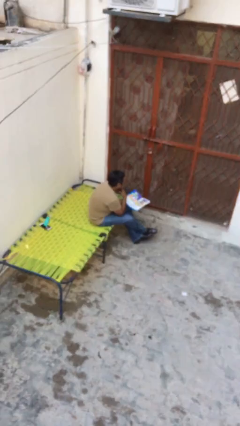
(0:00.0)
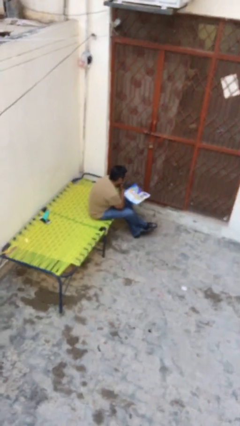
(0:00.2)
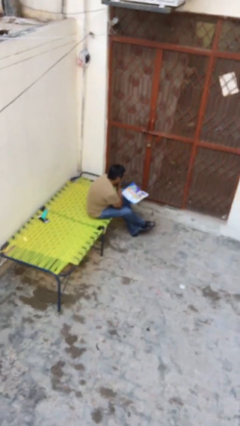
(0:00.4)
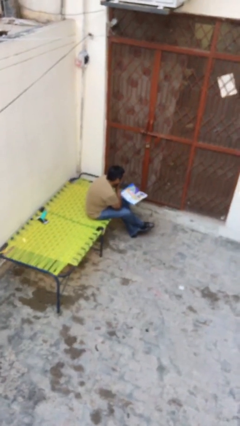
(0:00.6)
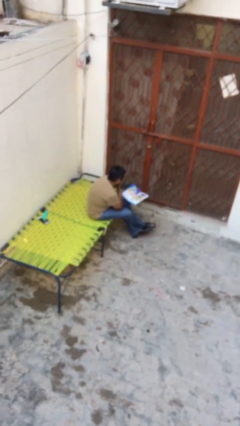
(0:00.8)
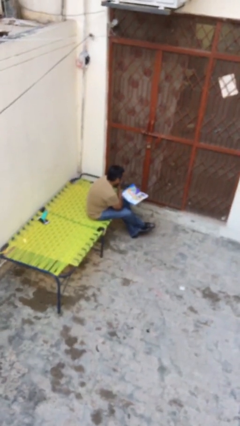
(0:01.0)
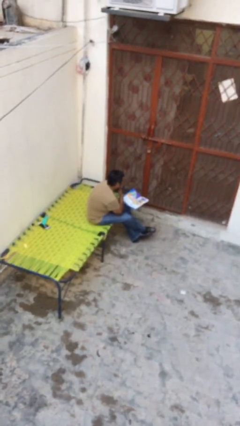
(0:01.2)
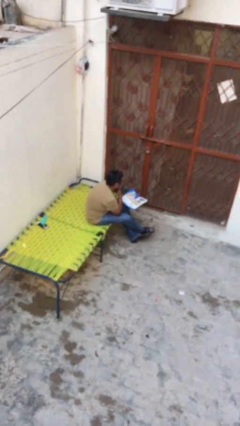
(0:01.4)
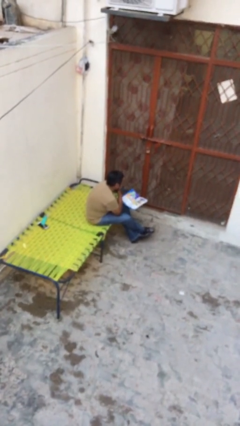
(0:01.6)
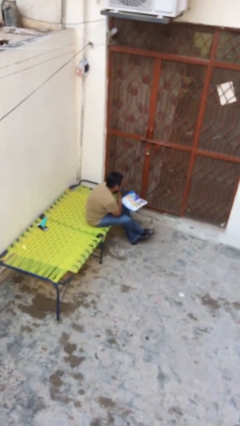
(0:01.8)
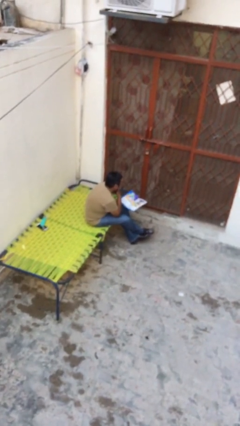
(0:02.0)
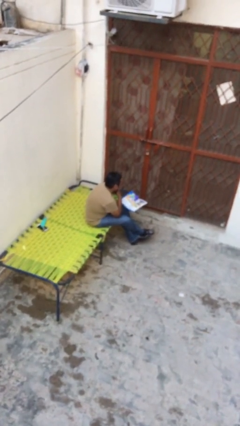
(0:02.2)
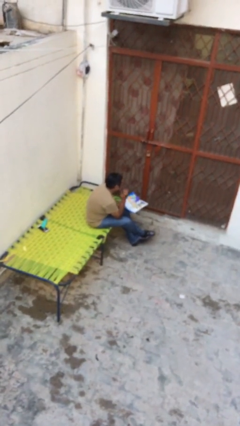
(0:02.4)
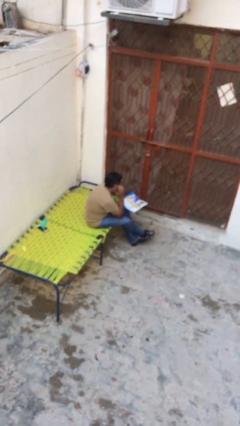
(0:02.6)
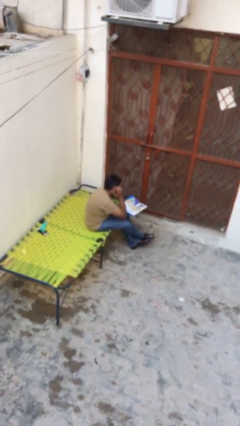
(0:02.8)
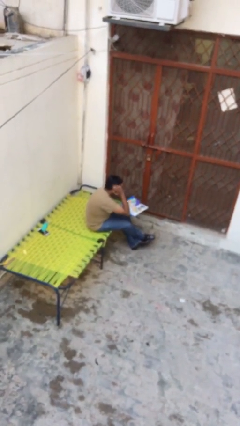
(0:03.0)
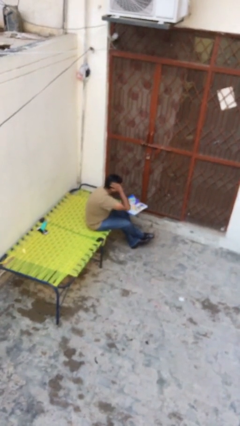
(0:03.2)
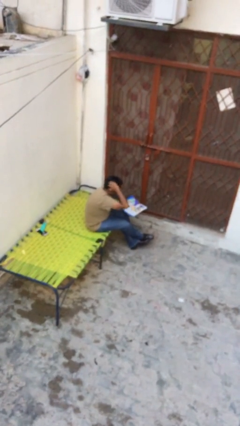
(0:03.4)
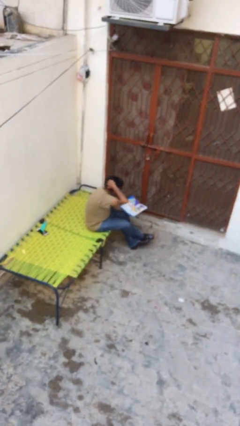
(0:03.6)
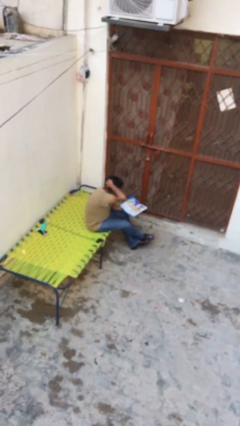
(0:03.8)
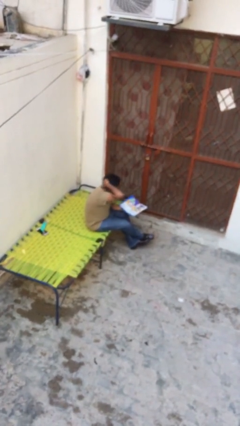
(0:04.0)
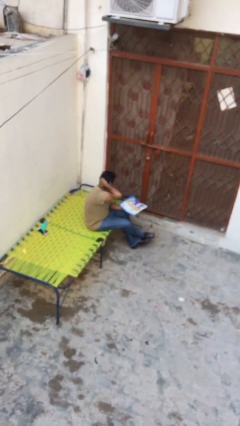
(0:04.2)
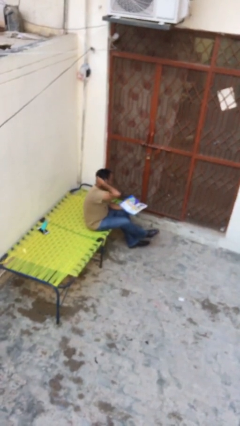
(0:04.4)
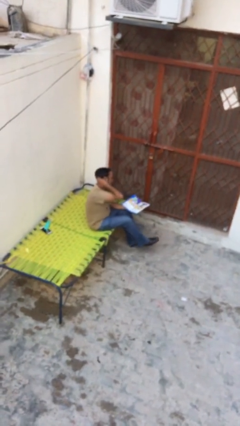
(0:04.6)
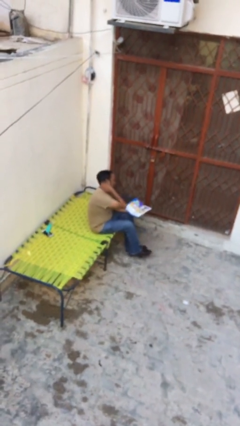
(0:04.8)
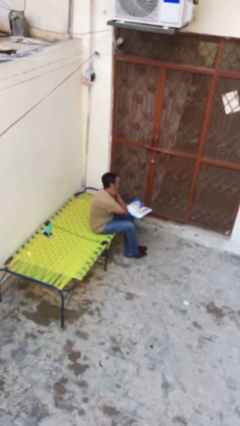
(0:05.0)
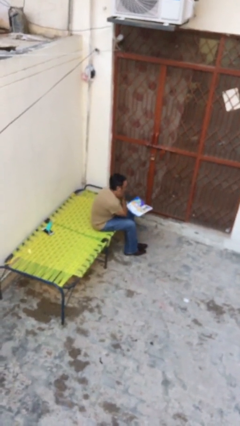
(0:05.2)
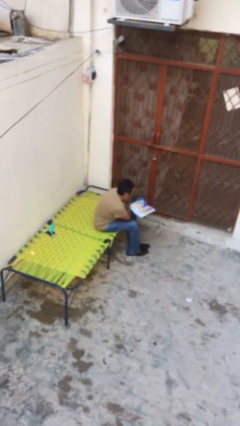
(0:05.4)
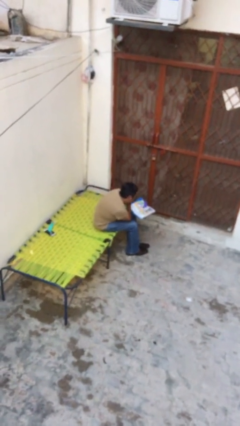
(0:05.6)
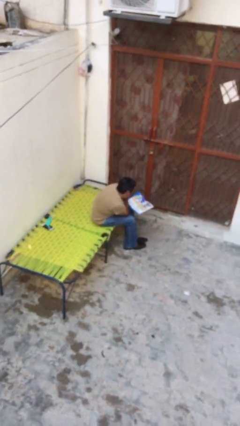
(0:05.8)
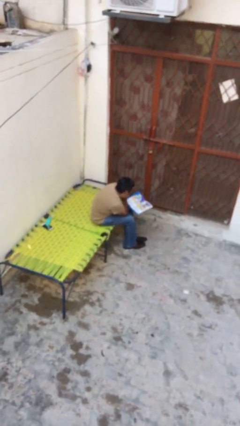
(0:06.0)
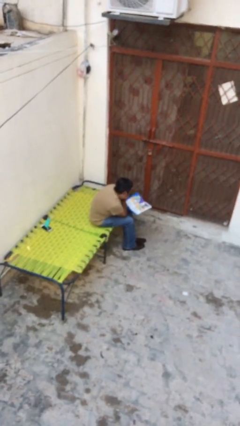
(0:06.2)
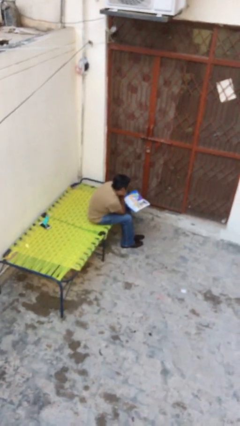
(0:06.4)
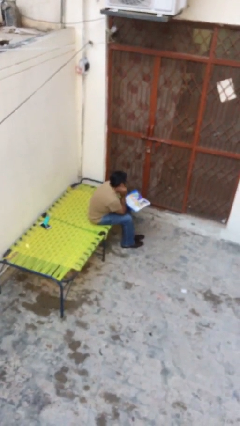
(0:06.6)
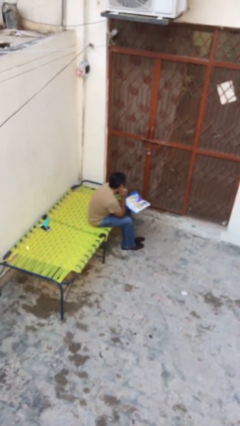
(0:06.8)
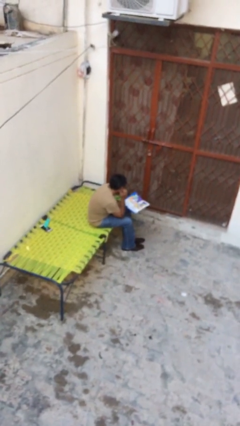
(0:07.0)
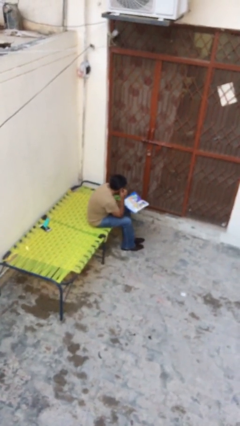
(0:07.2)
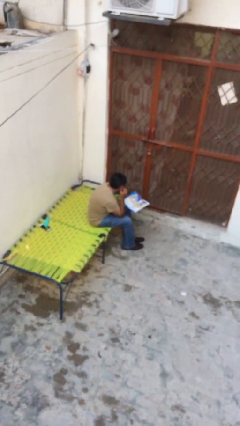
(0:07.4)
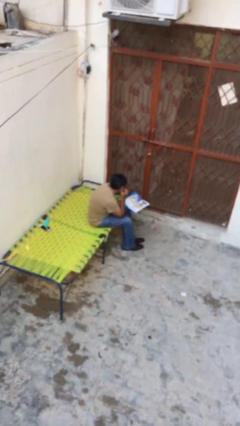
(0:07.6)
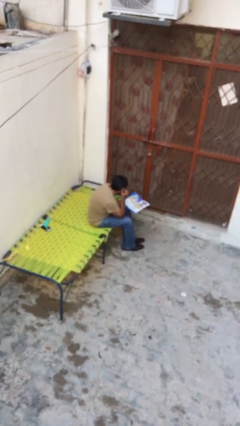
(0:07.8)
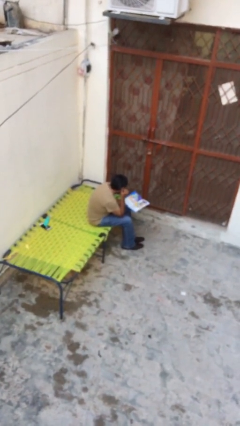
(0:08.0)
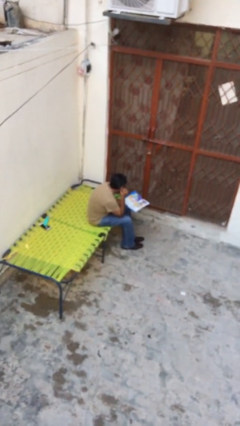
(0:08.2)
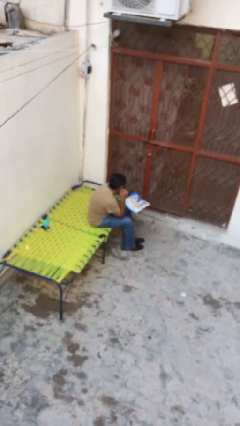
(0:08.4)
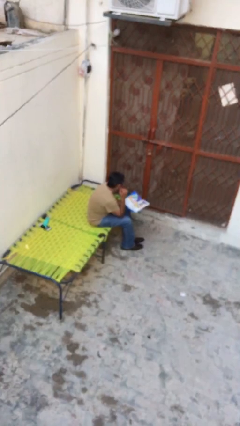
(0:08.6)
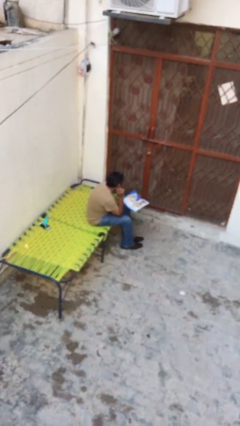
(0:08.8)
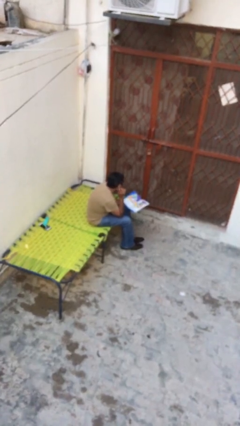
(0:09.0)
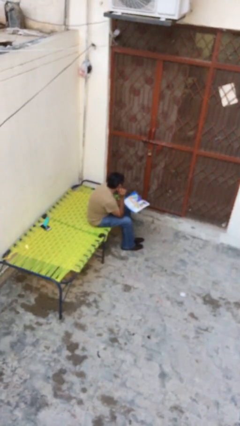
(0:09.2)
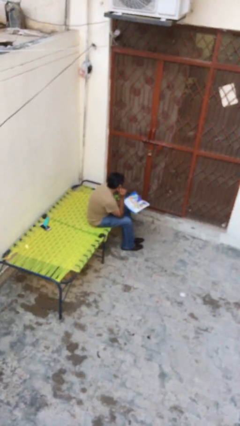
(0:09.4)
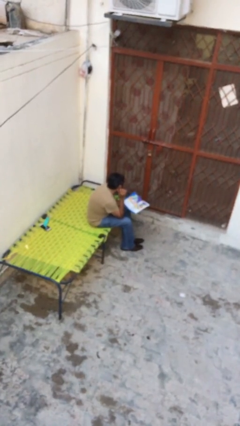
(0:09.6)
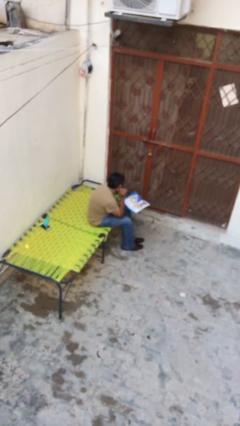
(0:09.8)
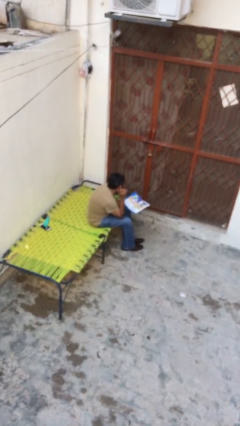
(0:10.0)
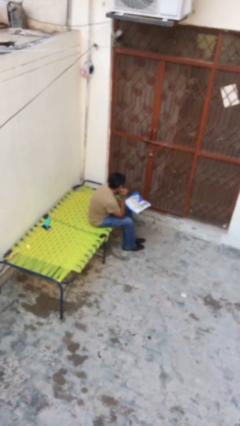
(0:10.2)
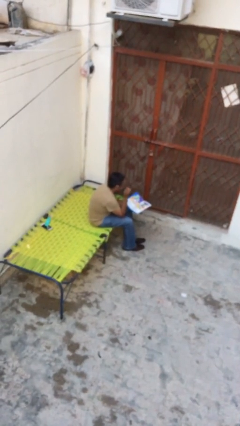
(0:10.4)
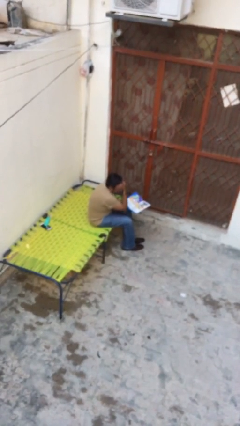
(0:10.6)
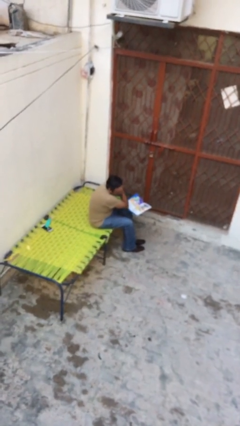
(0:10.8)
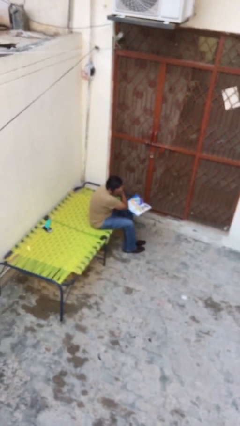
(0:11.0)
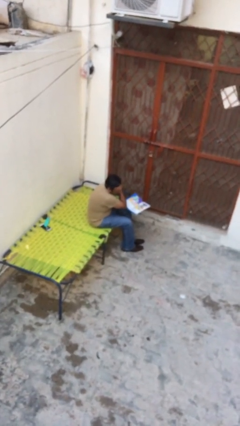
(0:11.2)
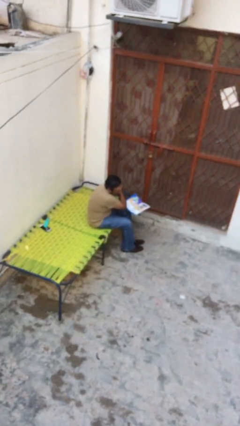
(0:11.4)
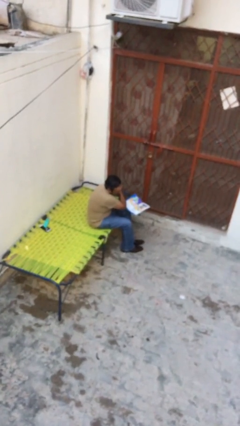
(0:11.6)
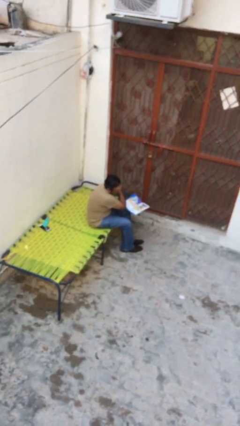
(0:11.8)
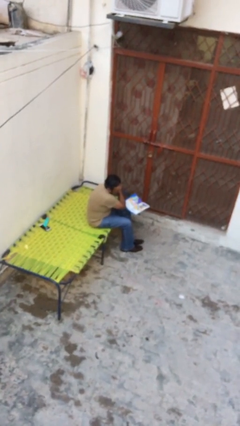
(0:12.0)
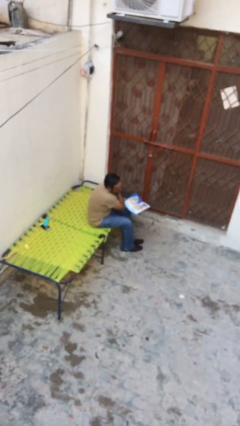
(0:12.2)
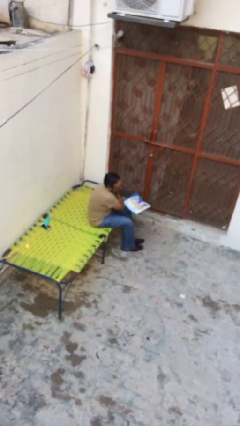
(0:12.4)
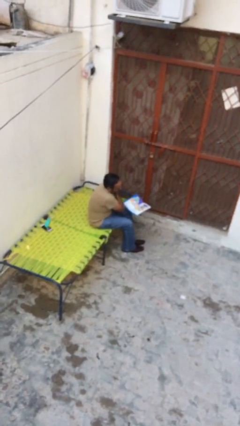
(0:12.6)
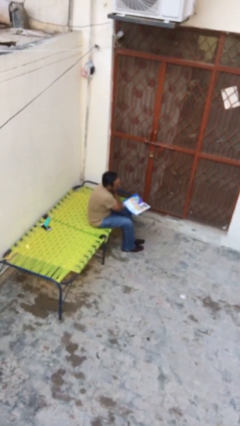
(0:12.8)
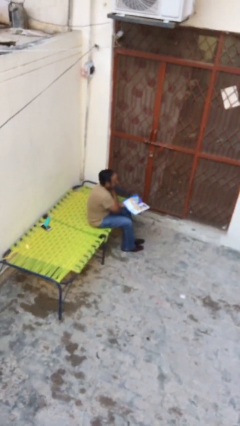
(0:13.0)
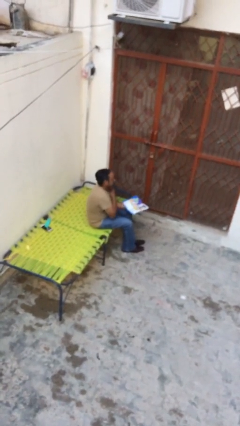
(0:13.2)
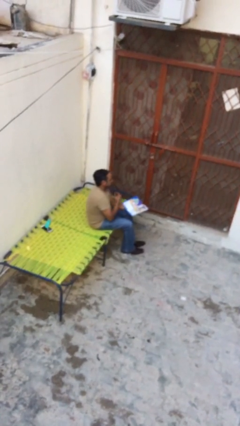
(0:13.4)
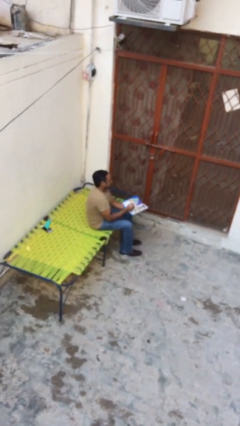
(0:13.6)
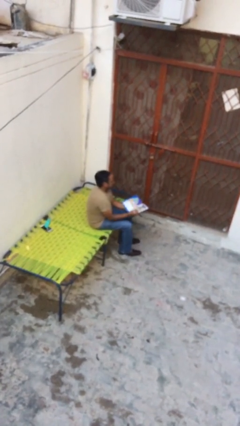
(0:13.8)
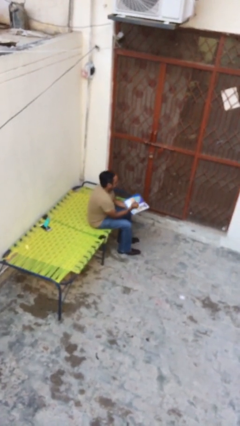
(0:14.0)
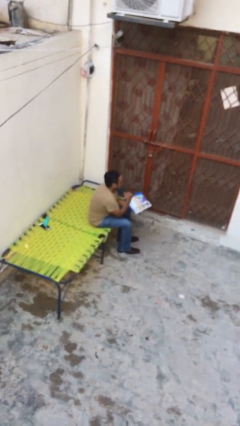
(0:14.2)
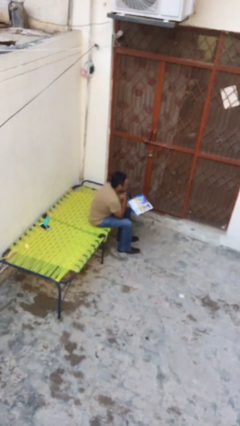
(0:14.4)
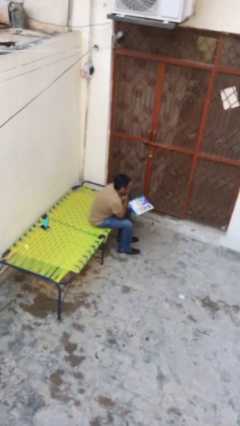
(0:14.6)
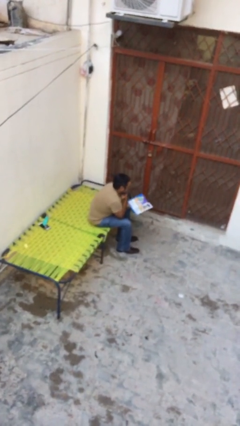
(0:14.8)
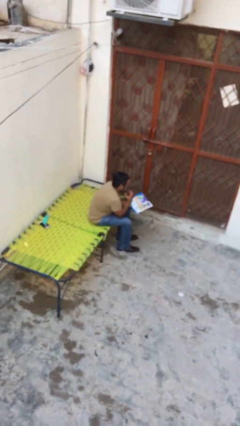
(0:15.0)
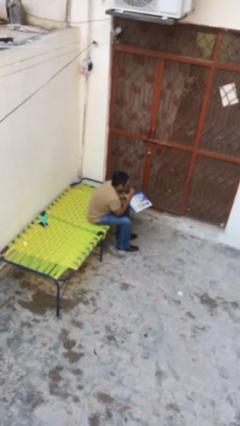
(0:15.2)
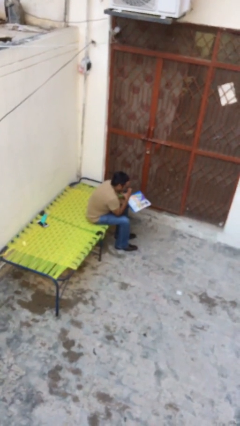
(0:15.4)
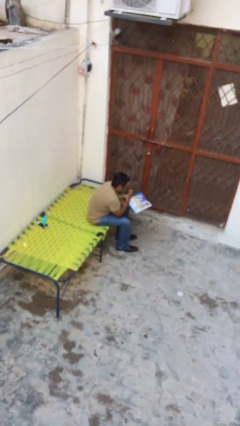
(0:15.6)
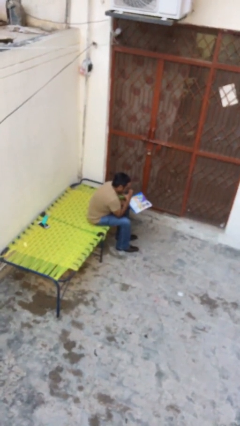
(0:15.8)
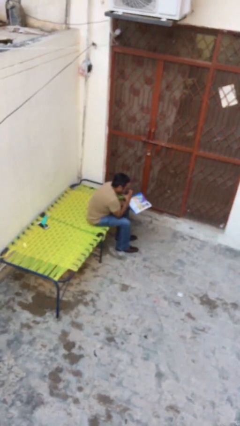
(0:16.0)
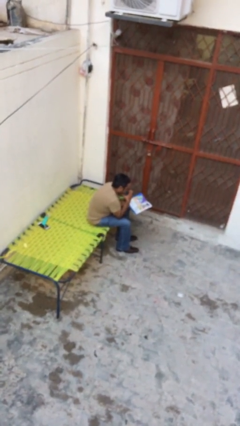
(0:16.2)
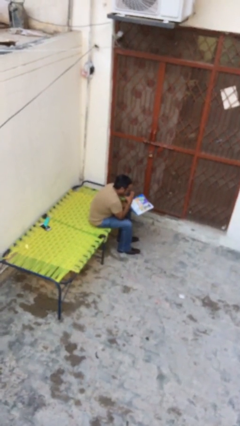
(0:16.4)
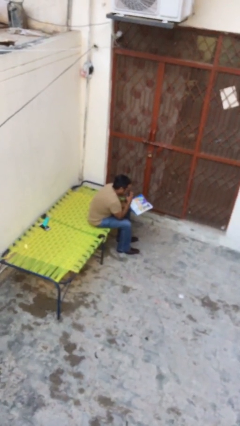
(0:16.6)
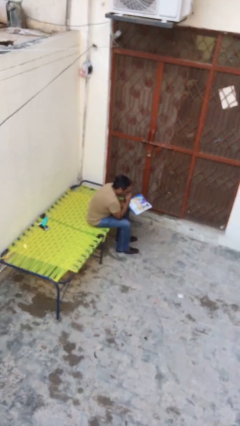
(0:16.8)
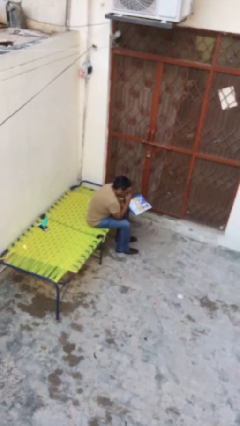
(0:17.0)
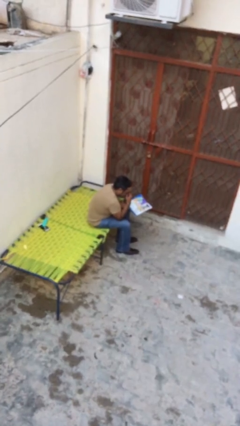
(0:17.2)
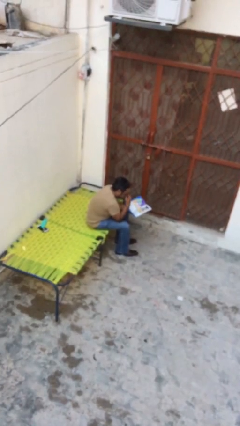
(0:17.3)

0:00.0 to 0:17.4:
person reads document

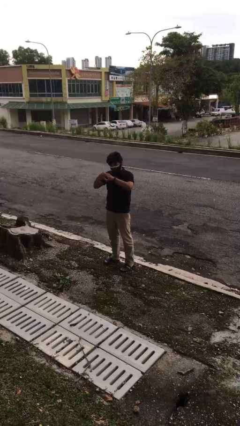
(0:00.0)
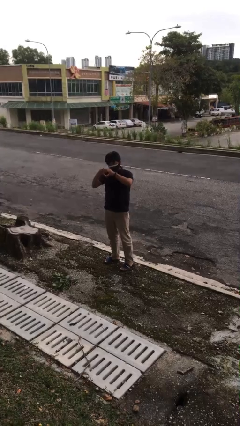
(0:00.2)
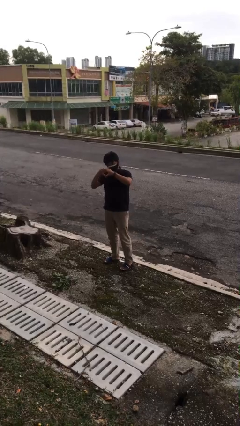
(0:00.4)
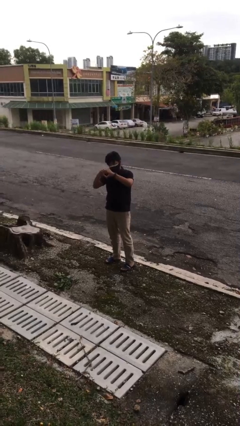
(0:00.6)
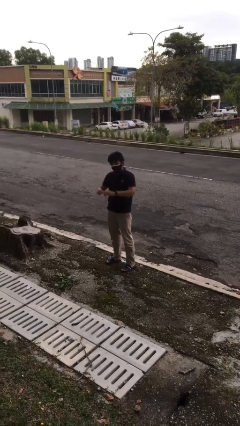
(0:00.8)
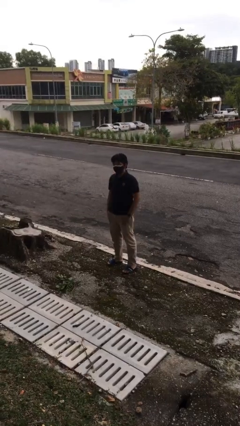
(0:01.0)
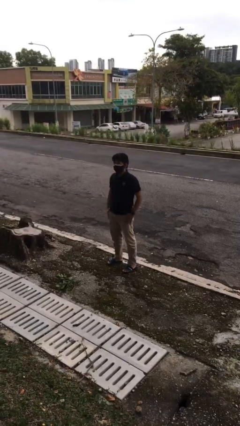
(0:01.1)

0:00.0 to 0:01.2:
person gestures heart
